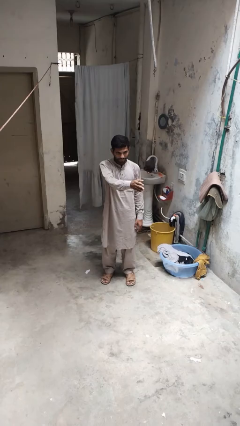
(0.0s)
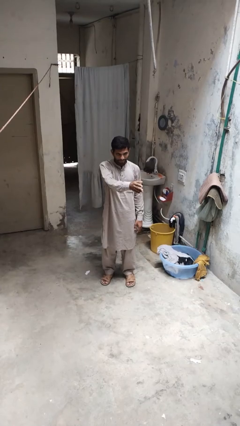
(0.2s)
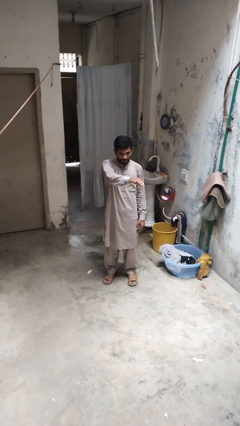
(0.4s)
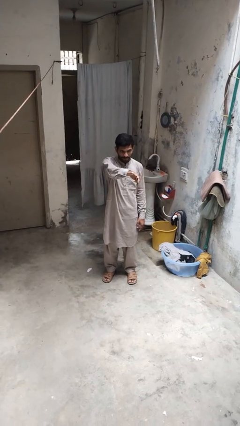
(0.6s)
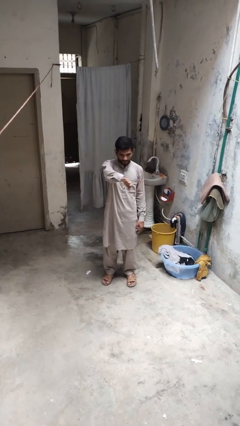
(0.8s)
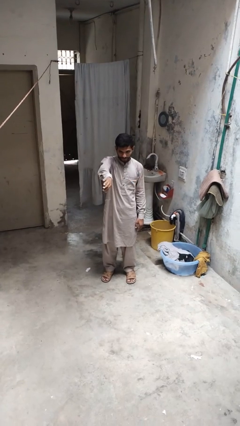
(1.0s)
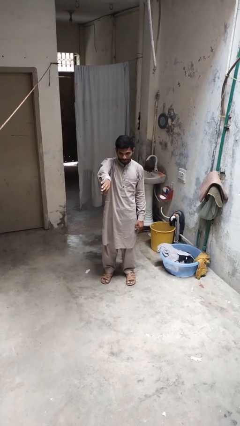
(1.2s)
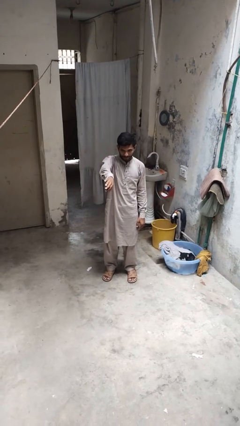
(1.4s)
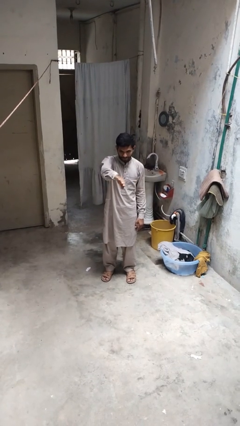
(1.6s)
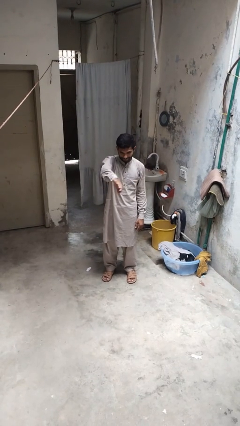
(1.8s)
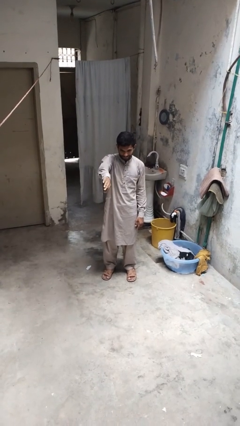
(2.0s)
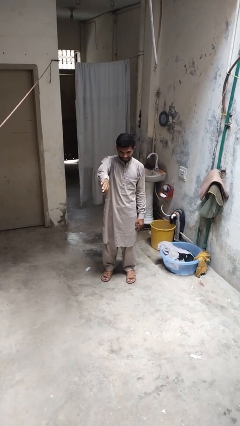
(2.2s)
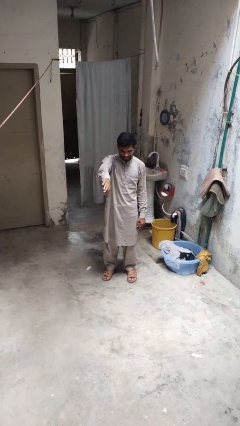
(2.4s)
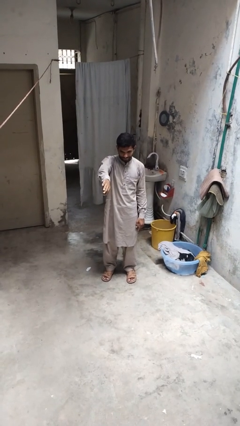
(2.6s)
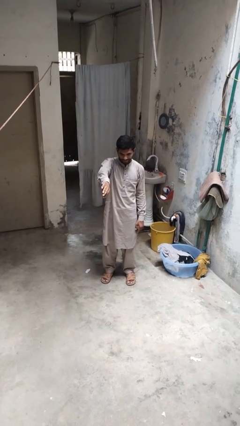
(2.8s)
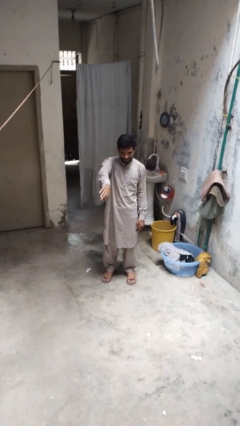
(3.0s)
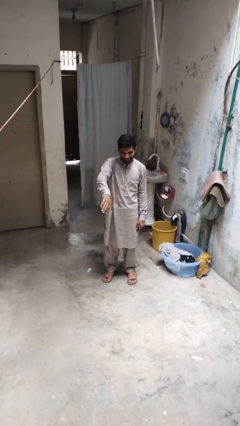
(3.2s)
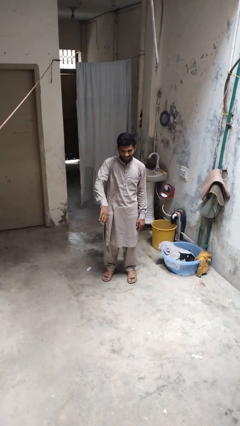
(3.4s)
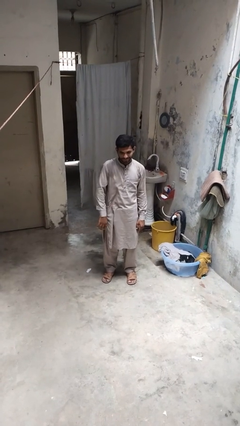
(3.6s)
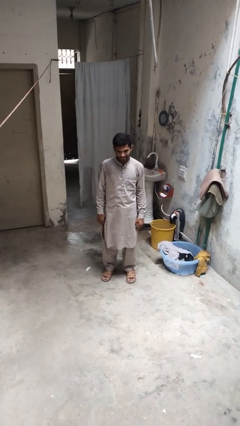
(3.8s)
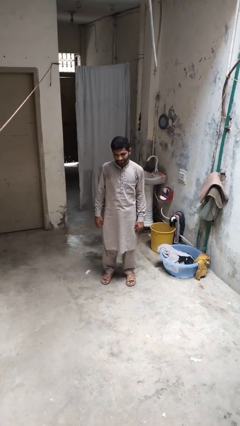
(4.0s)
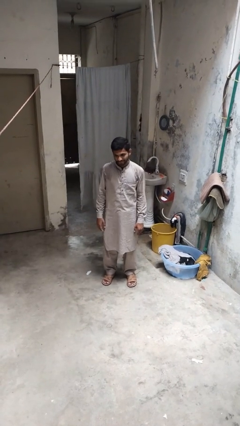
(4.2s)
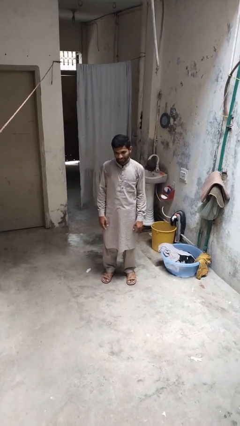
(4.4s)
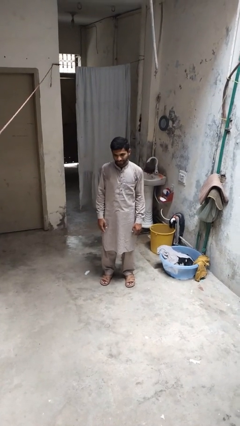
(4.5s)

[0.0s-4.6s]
person gestures swipe right

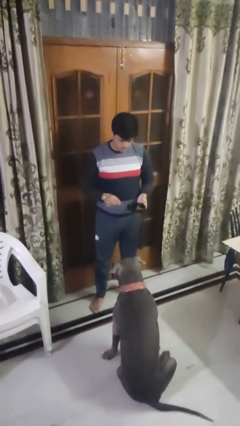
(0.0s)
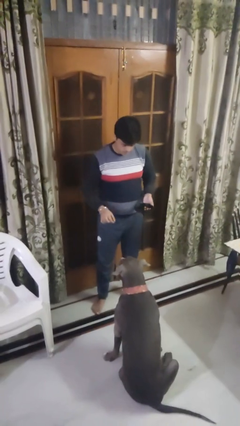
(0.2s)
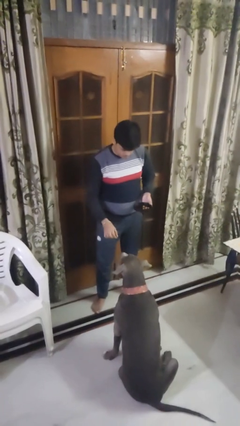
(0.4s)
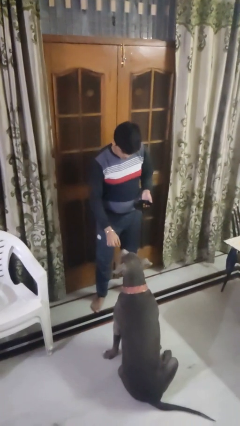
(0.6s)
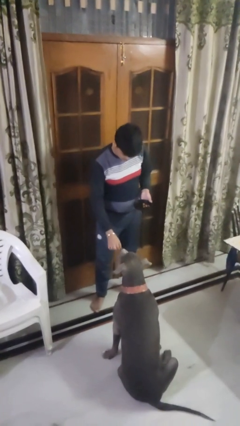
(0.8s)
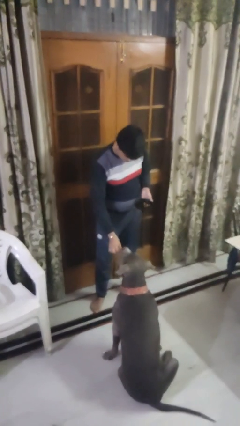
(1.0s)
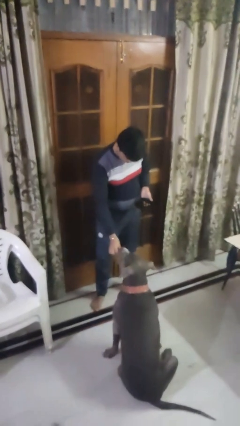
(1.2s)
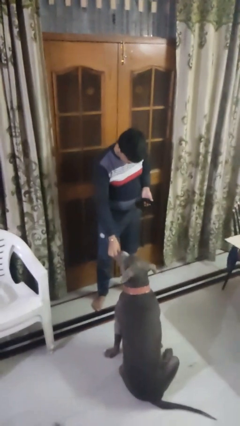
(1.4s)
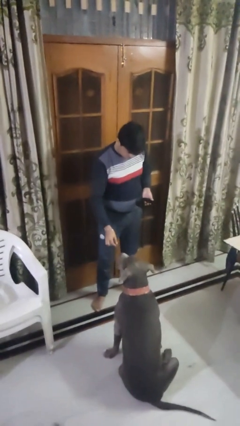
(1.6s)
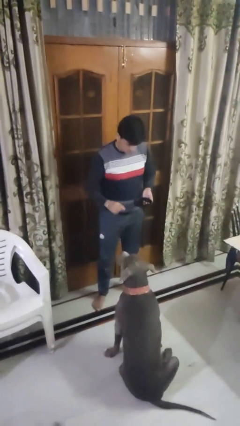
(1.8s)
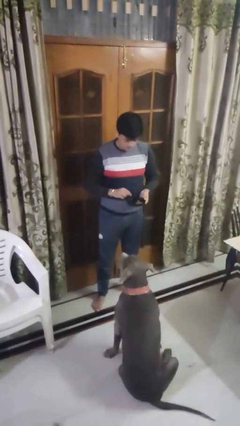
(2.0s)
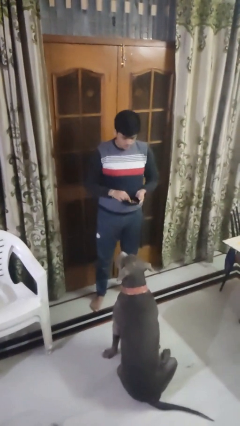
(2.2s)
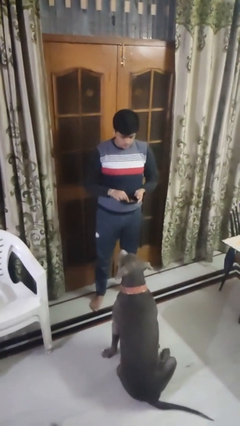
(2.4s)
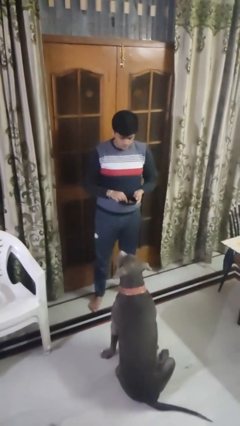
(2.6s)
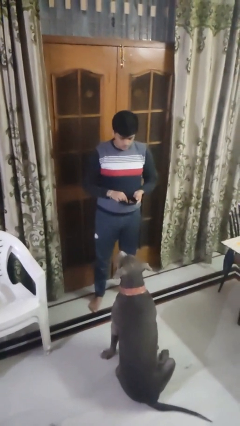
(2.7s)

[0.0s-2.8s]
person feeds dog

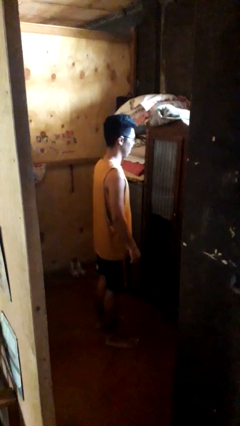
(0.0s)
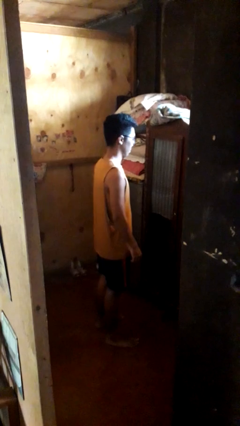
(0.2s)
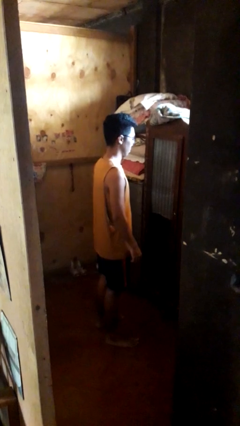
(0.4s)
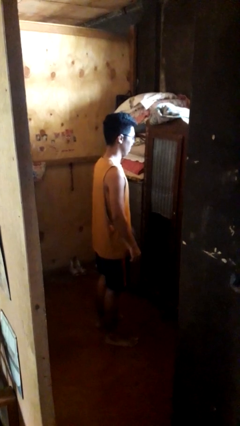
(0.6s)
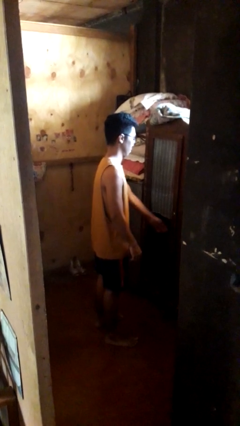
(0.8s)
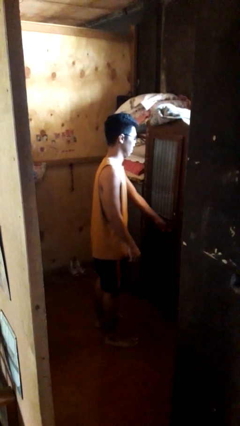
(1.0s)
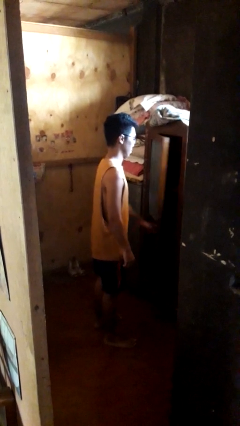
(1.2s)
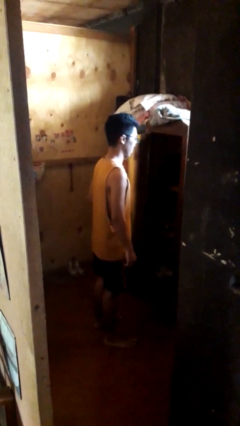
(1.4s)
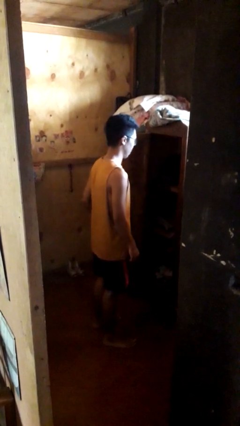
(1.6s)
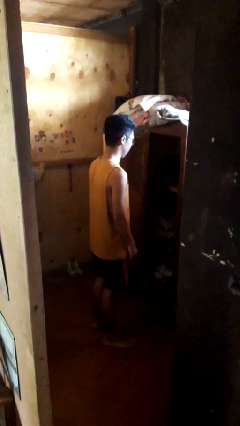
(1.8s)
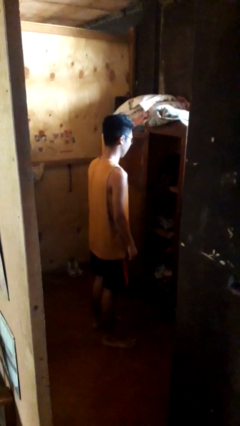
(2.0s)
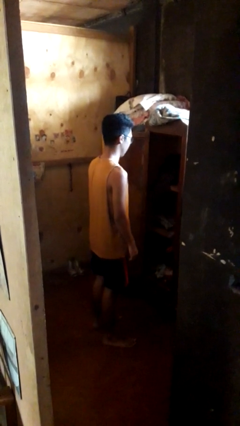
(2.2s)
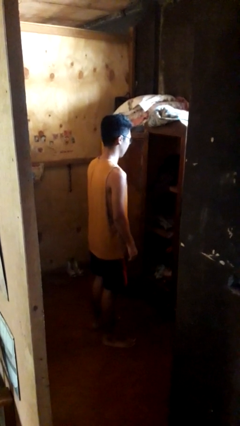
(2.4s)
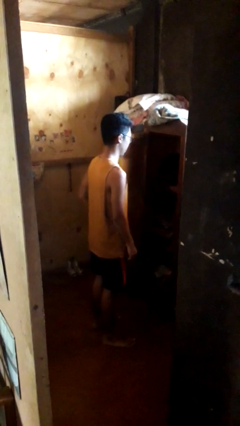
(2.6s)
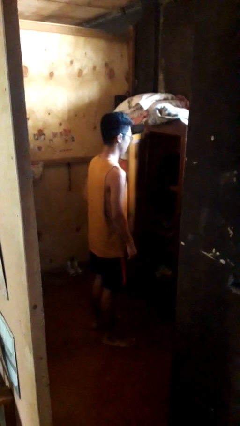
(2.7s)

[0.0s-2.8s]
person opens closet door

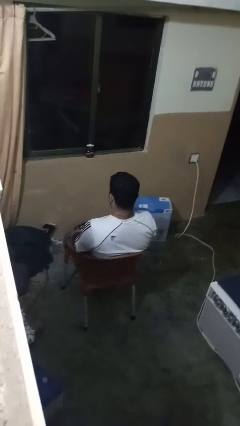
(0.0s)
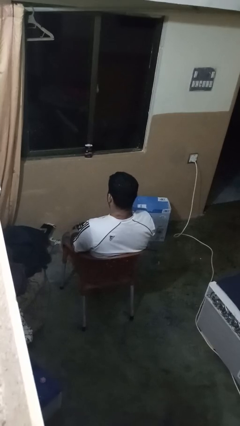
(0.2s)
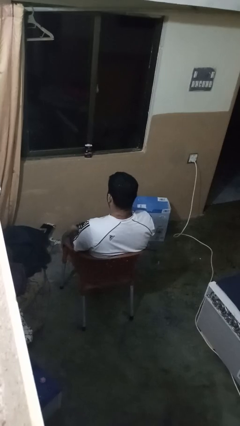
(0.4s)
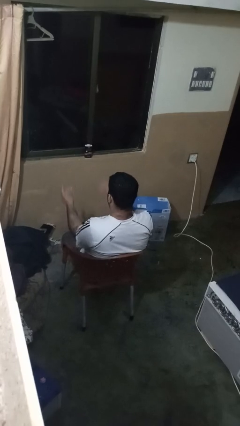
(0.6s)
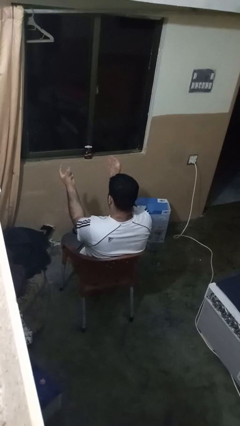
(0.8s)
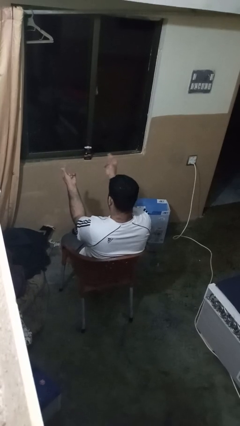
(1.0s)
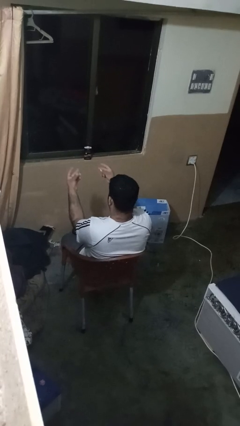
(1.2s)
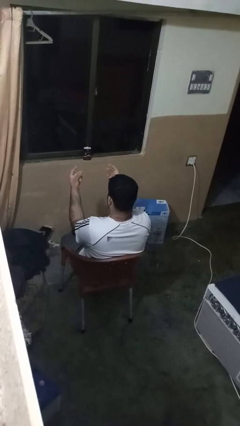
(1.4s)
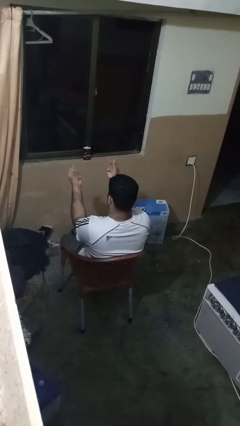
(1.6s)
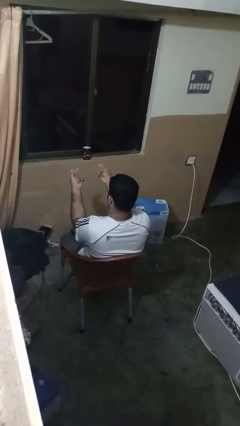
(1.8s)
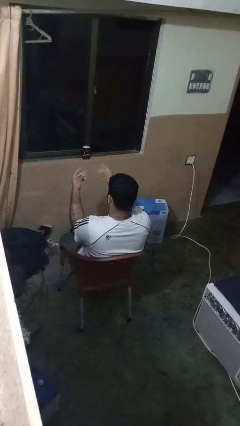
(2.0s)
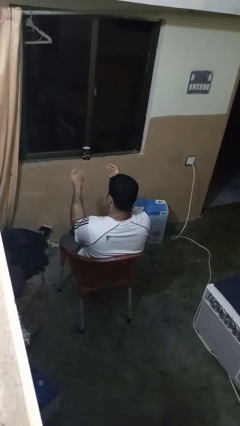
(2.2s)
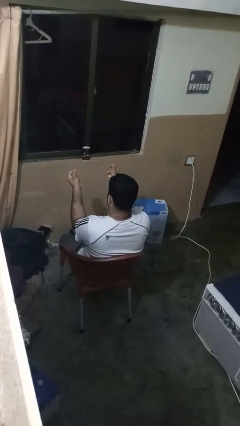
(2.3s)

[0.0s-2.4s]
person snaps fingers

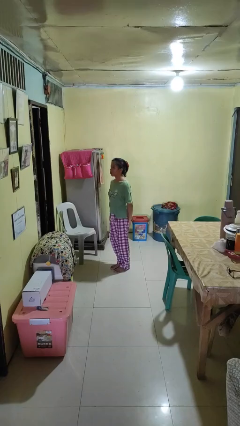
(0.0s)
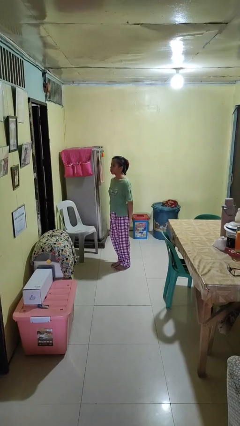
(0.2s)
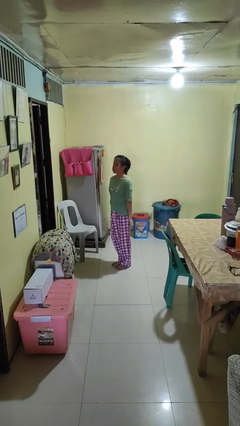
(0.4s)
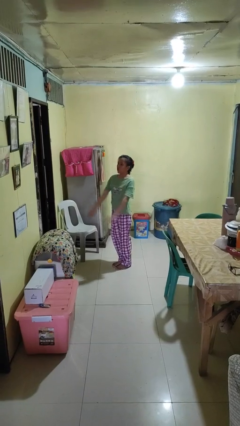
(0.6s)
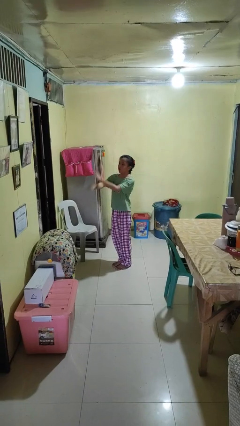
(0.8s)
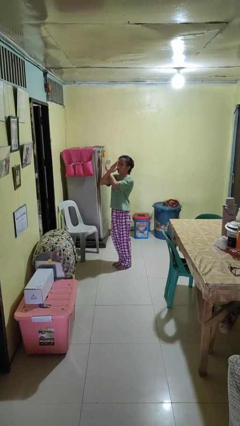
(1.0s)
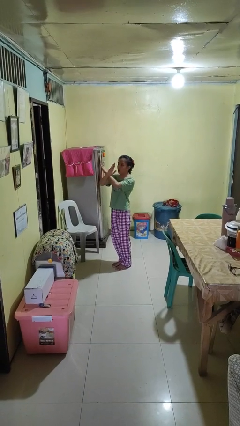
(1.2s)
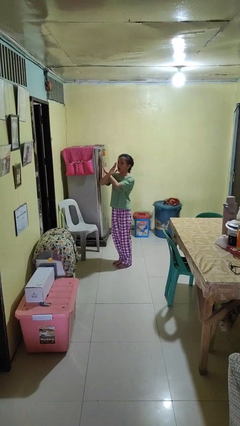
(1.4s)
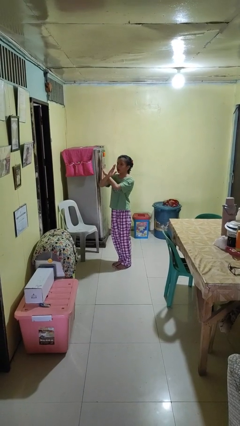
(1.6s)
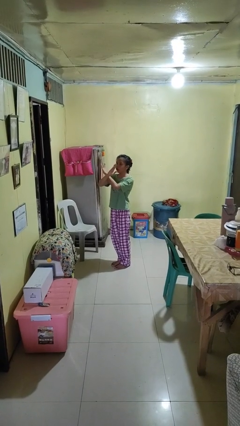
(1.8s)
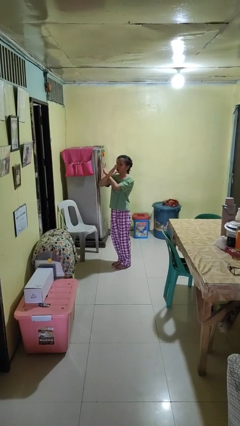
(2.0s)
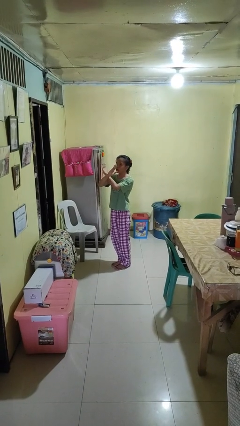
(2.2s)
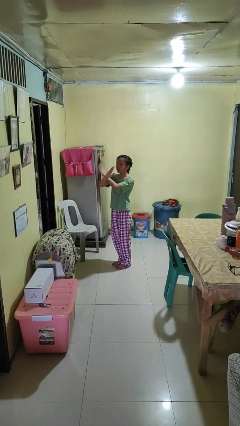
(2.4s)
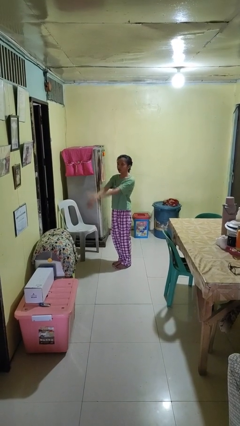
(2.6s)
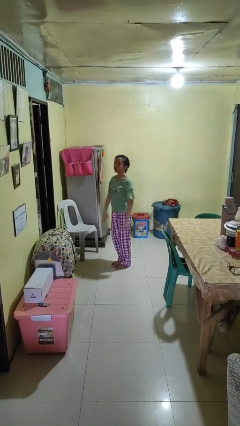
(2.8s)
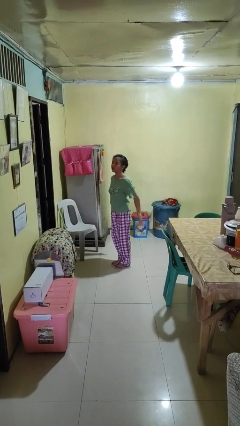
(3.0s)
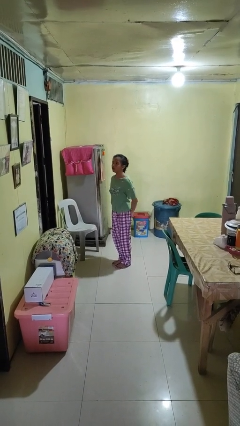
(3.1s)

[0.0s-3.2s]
person gestures arms x

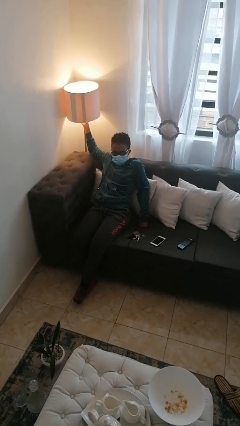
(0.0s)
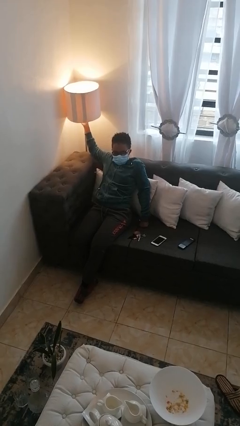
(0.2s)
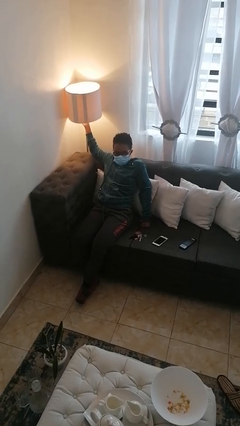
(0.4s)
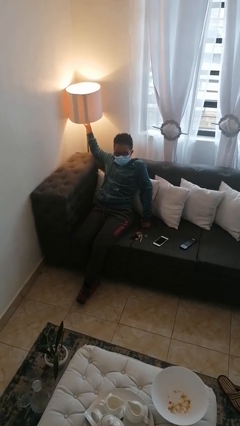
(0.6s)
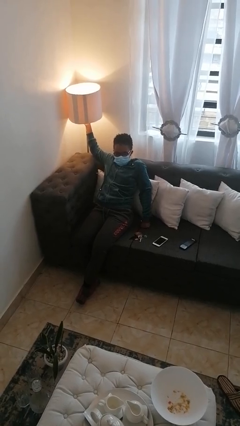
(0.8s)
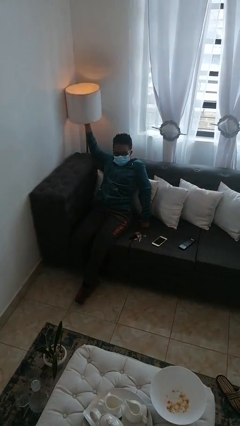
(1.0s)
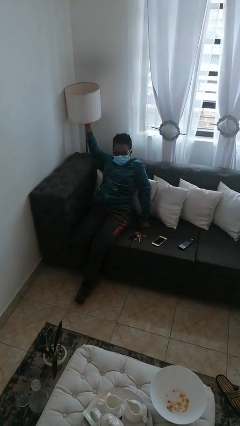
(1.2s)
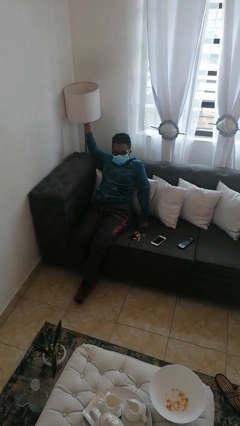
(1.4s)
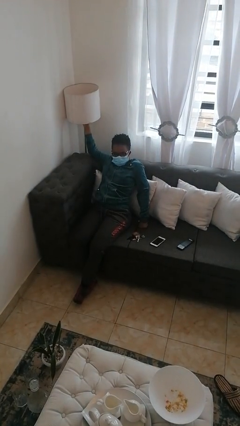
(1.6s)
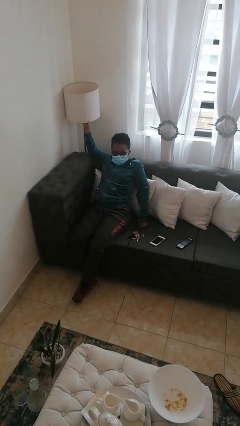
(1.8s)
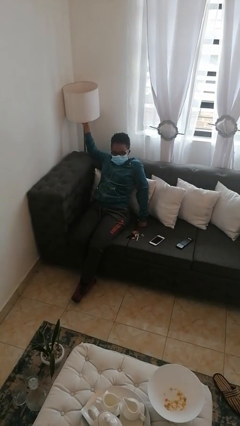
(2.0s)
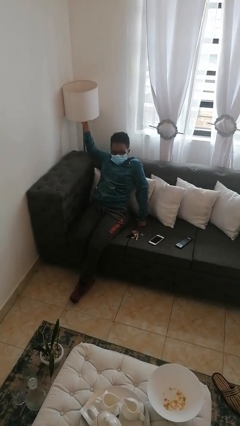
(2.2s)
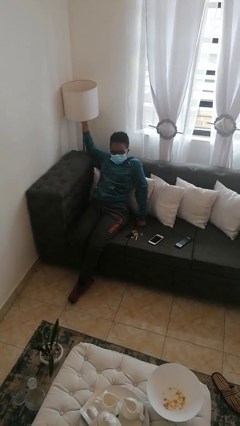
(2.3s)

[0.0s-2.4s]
person turns off lamp
